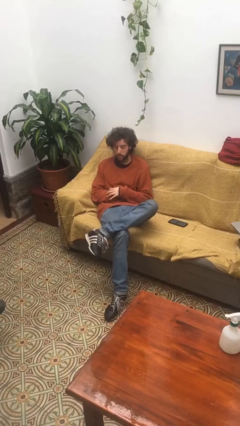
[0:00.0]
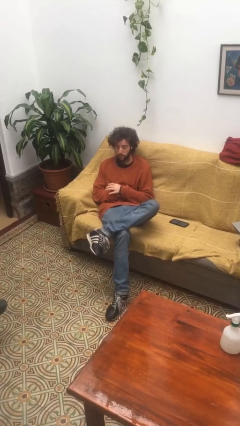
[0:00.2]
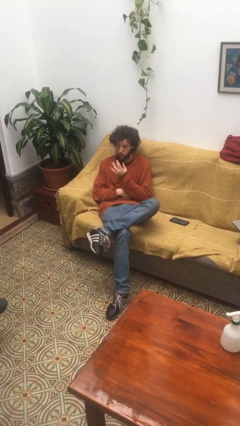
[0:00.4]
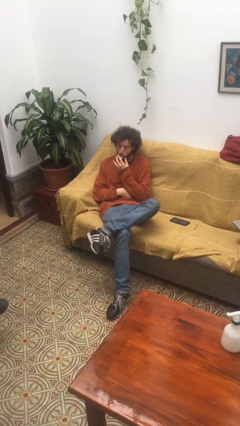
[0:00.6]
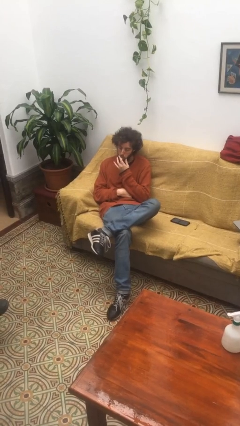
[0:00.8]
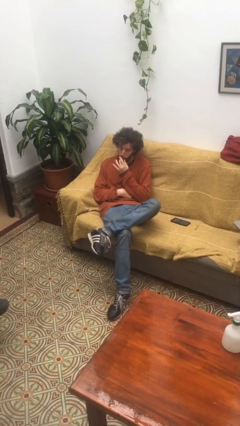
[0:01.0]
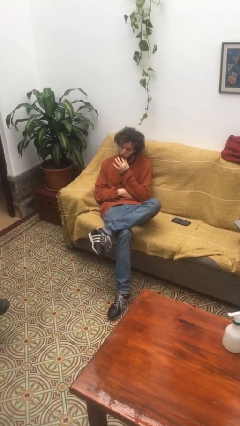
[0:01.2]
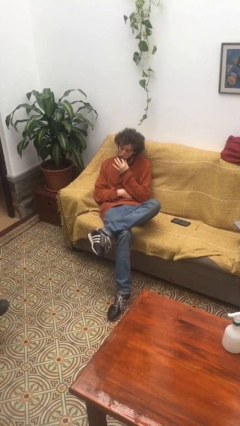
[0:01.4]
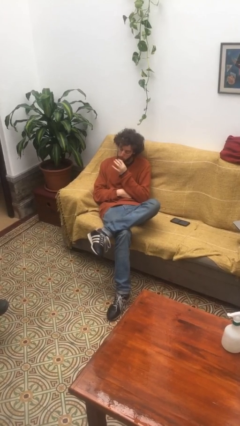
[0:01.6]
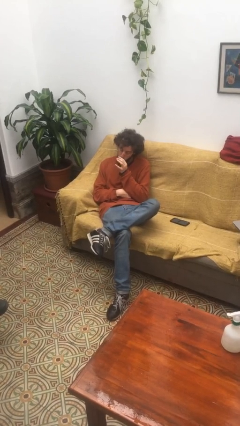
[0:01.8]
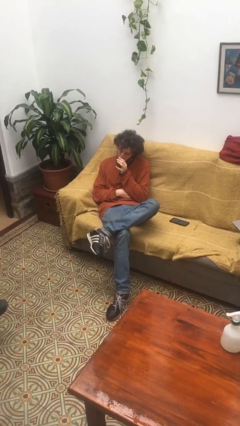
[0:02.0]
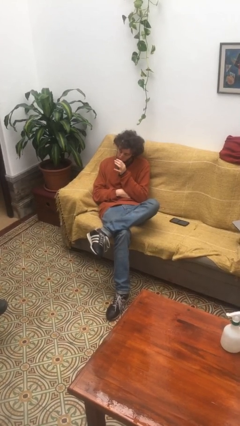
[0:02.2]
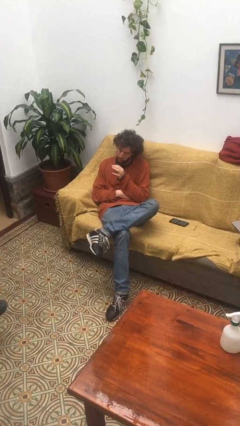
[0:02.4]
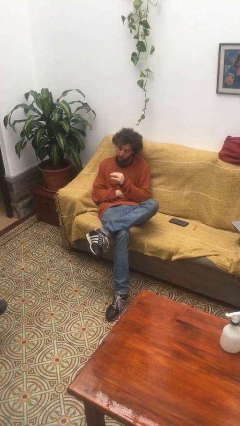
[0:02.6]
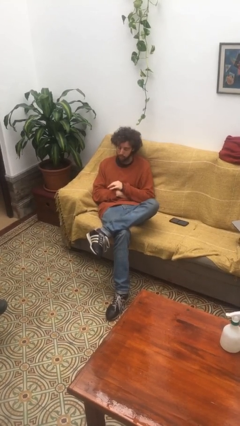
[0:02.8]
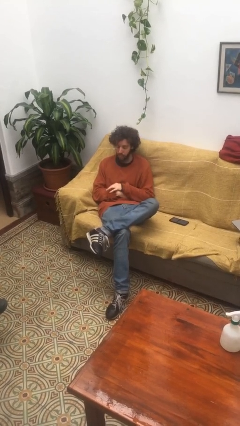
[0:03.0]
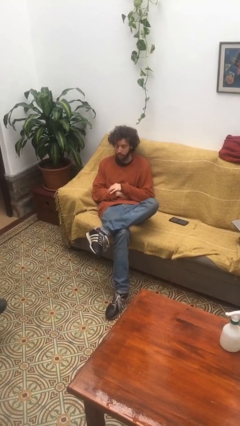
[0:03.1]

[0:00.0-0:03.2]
person licks fingers

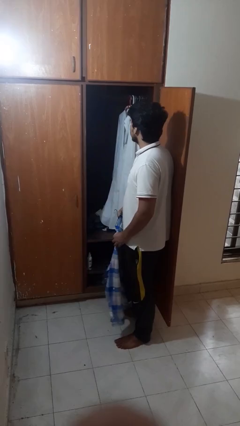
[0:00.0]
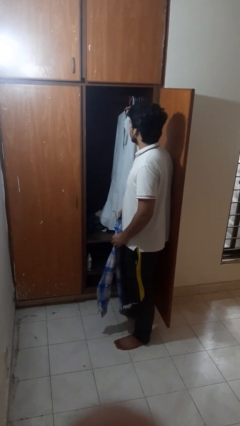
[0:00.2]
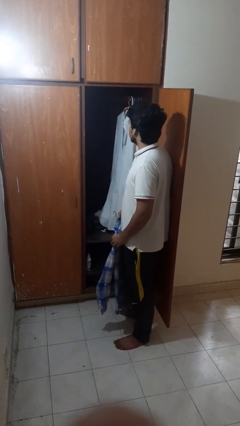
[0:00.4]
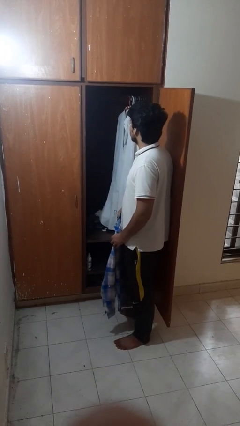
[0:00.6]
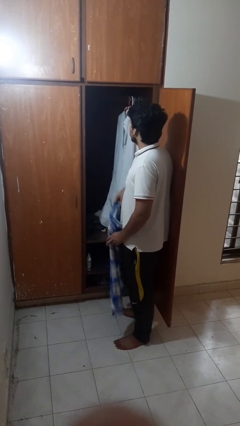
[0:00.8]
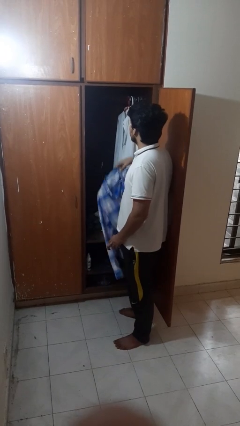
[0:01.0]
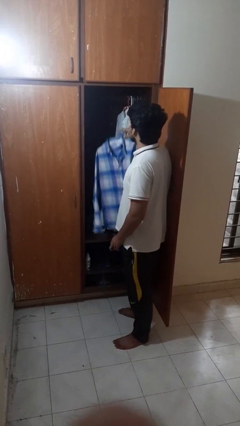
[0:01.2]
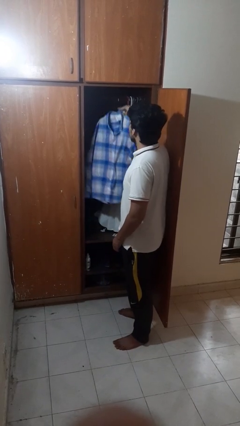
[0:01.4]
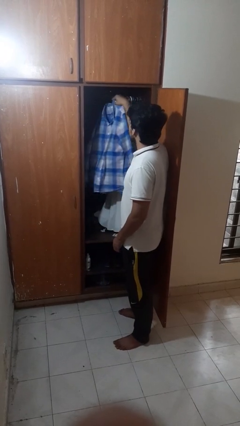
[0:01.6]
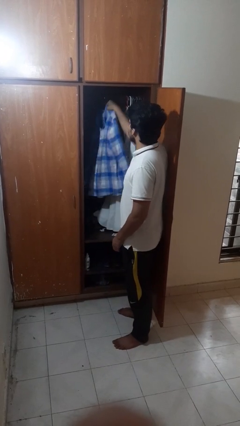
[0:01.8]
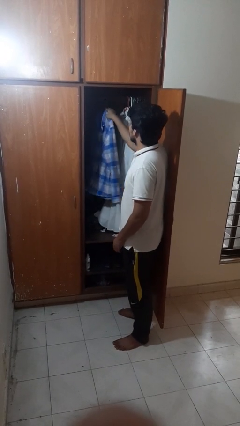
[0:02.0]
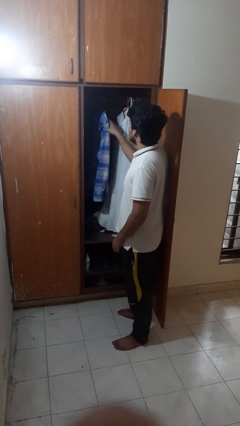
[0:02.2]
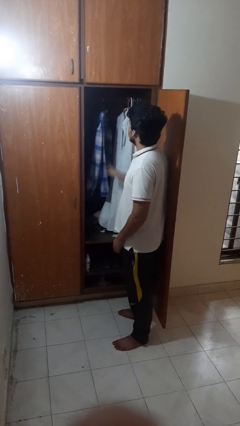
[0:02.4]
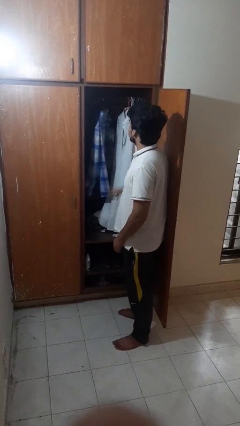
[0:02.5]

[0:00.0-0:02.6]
person puts clothes into closet

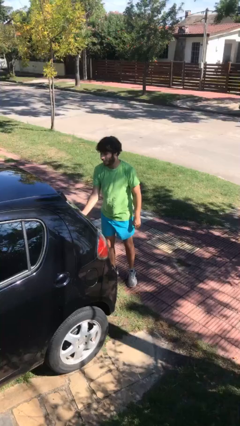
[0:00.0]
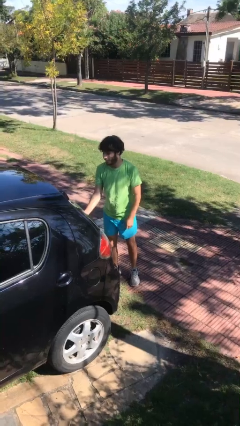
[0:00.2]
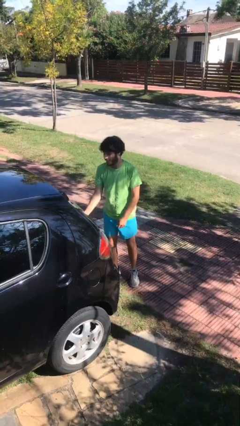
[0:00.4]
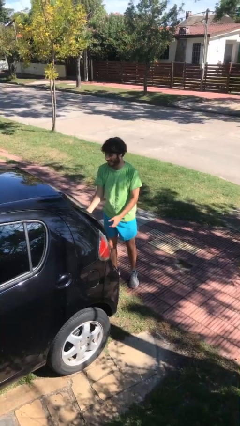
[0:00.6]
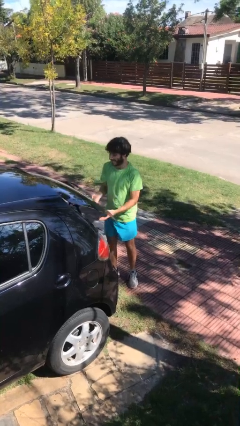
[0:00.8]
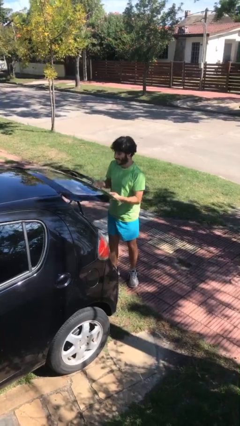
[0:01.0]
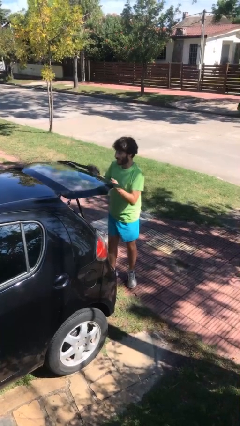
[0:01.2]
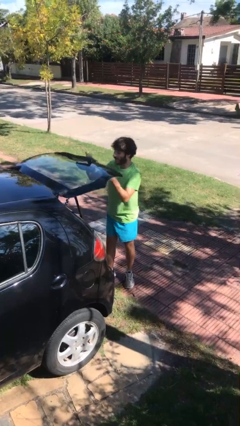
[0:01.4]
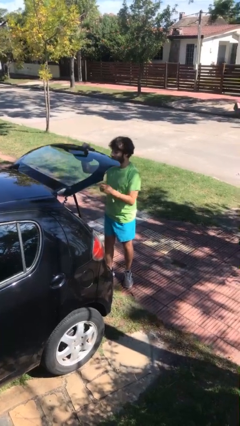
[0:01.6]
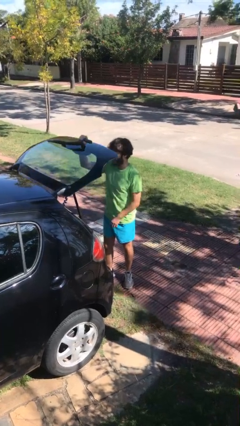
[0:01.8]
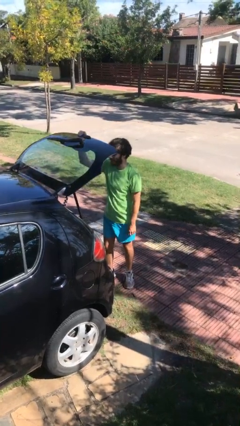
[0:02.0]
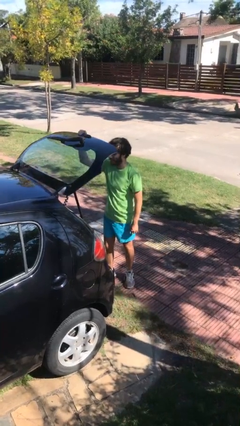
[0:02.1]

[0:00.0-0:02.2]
person opens car trunk

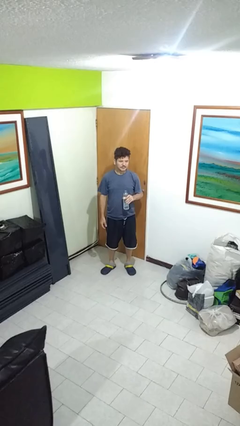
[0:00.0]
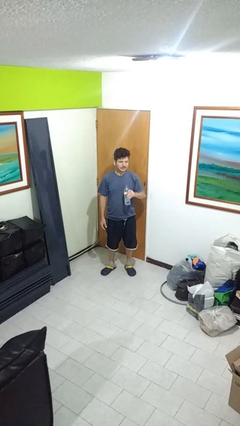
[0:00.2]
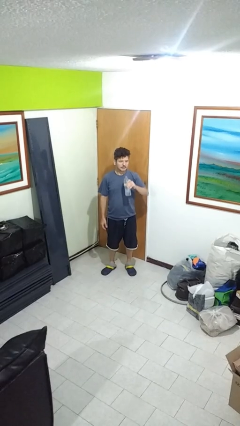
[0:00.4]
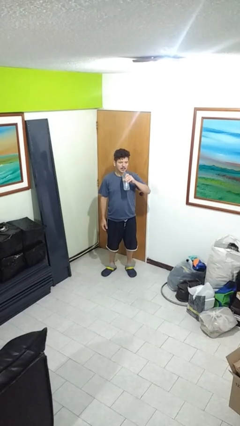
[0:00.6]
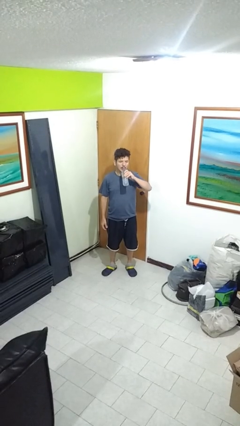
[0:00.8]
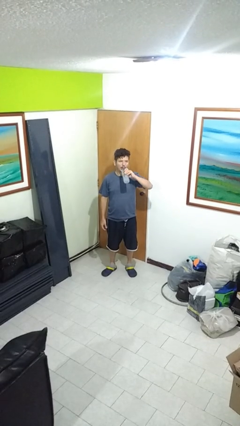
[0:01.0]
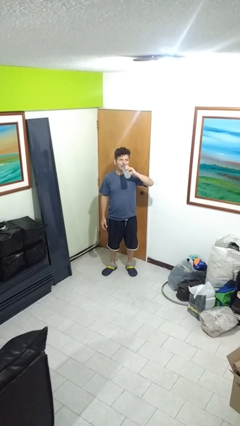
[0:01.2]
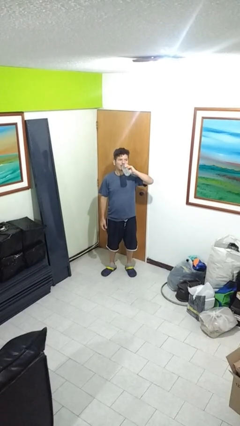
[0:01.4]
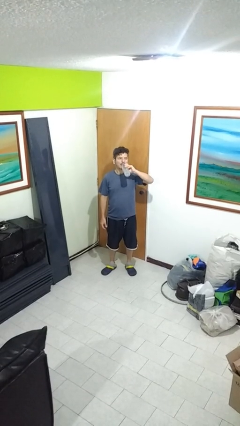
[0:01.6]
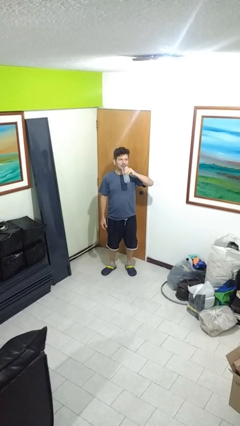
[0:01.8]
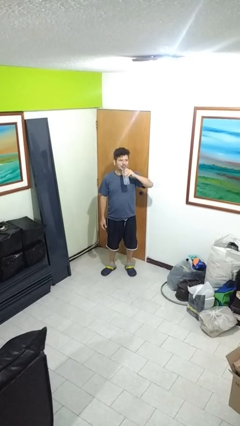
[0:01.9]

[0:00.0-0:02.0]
person drinks from bottle

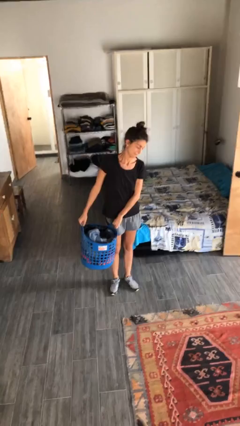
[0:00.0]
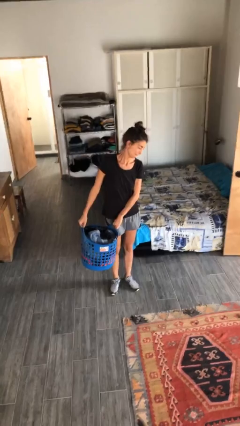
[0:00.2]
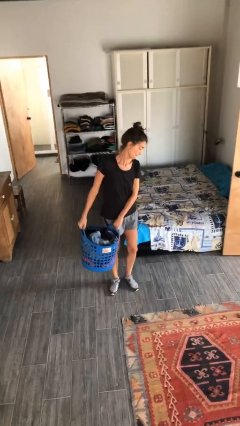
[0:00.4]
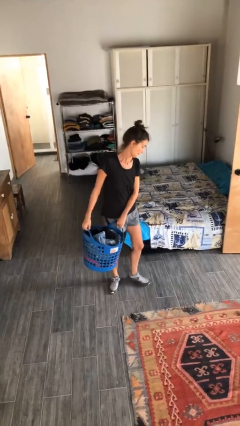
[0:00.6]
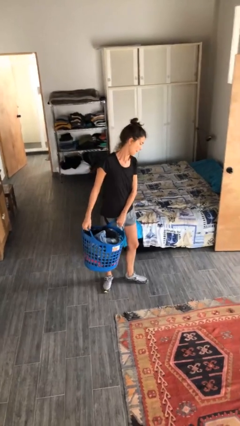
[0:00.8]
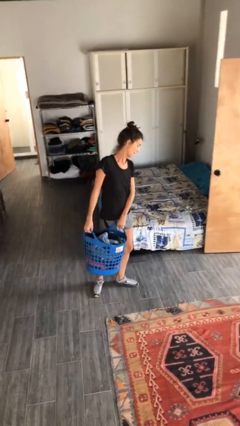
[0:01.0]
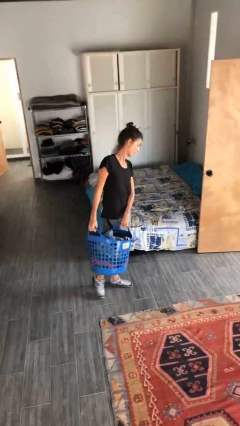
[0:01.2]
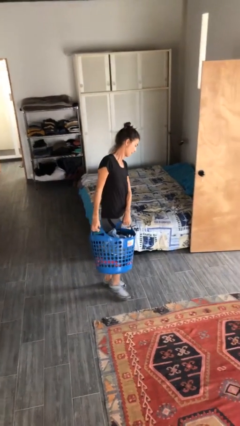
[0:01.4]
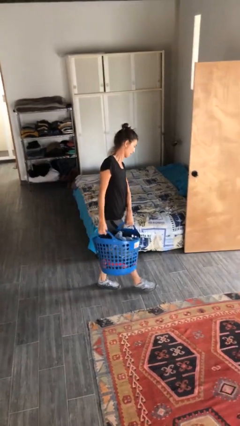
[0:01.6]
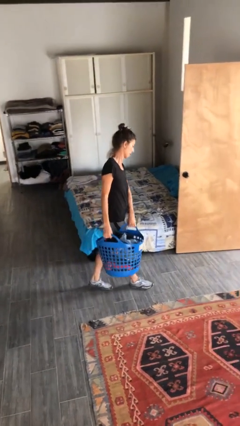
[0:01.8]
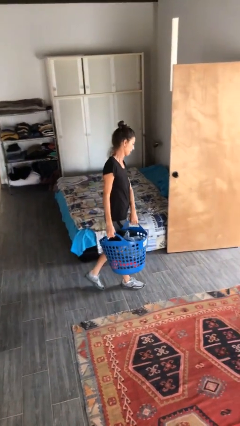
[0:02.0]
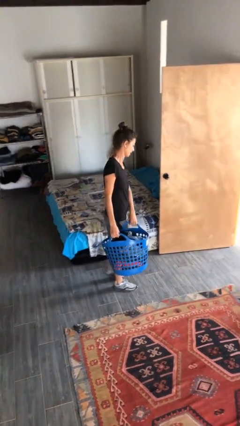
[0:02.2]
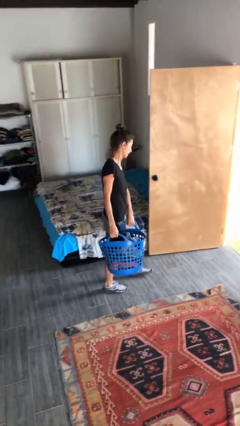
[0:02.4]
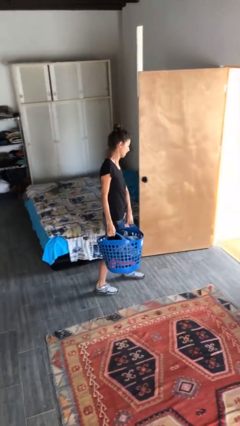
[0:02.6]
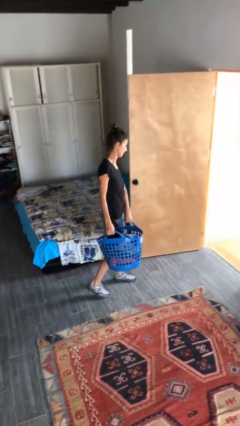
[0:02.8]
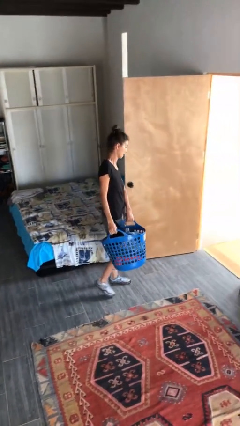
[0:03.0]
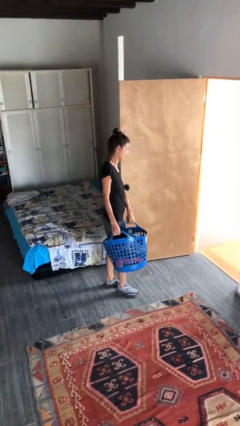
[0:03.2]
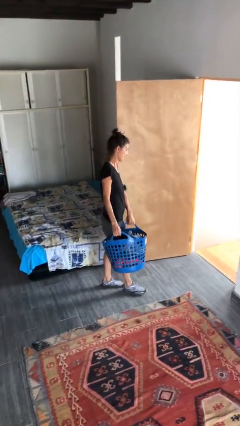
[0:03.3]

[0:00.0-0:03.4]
person carries laundry basket

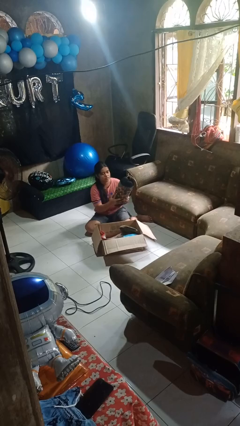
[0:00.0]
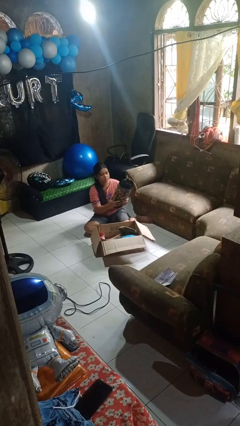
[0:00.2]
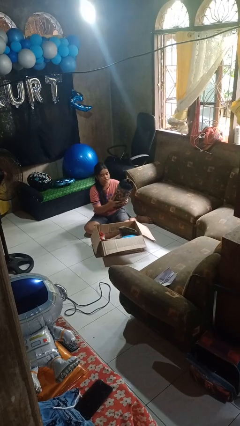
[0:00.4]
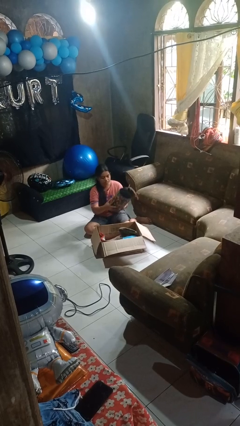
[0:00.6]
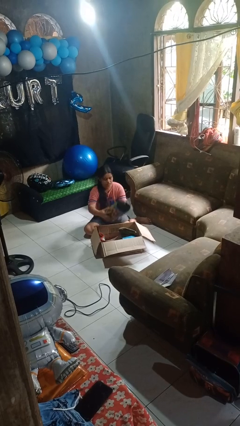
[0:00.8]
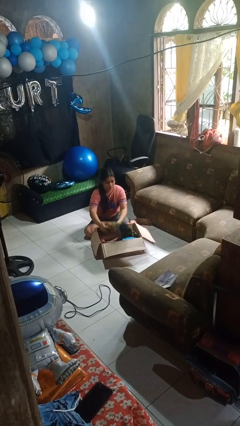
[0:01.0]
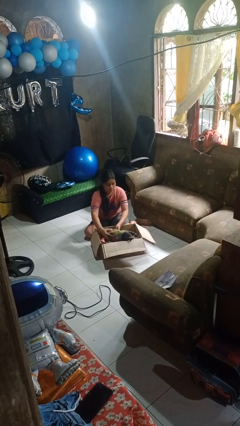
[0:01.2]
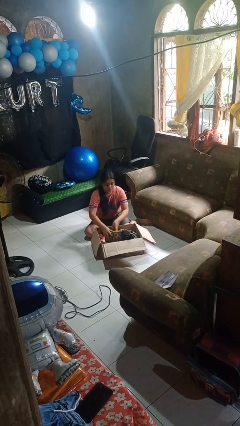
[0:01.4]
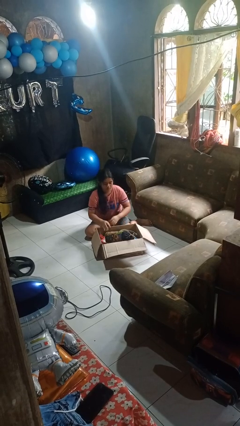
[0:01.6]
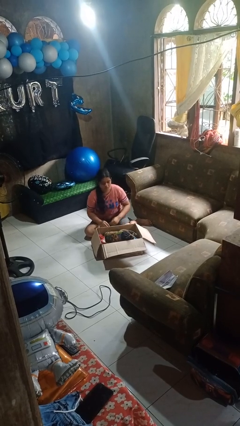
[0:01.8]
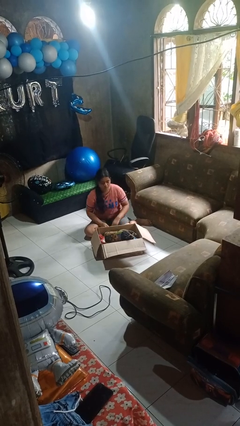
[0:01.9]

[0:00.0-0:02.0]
person puts object into box

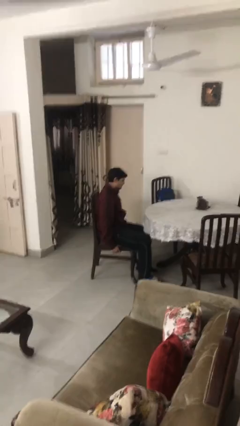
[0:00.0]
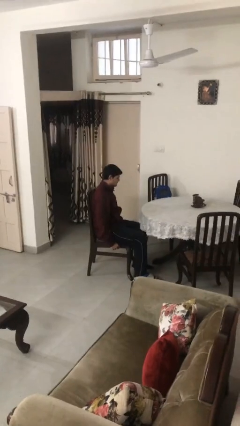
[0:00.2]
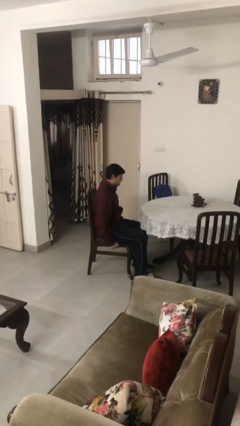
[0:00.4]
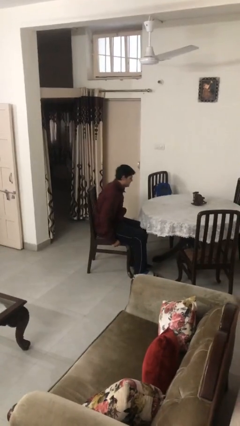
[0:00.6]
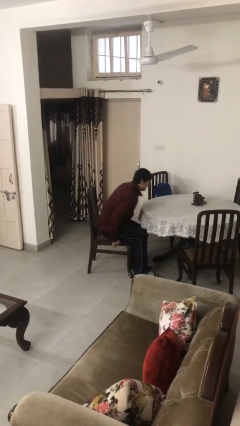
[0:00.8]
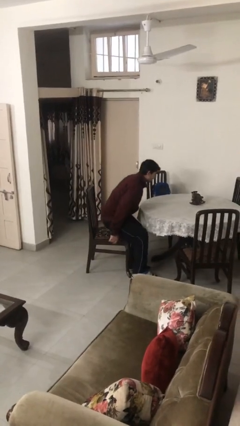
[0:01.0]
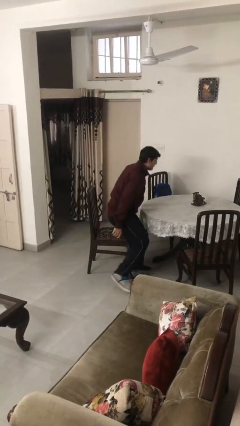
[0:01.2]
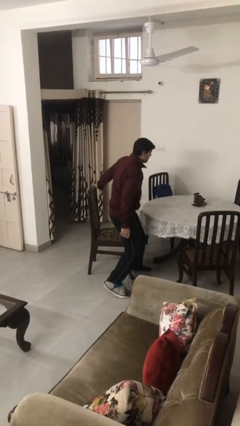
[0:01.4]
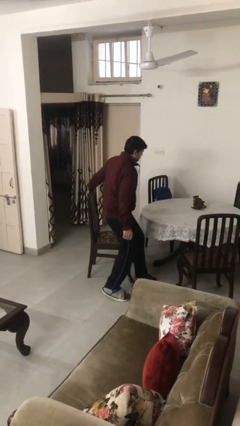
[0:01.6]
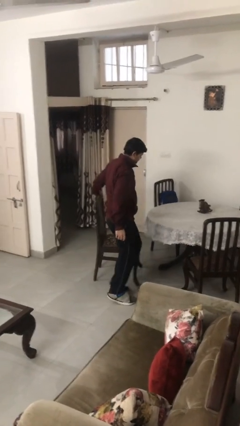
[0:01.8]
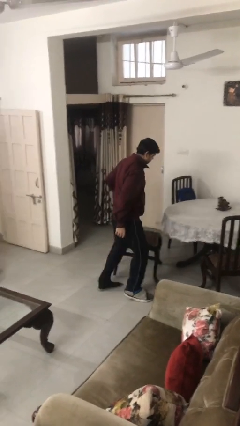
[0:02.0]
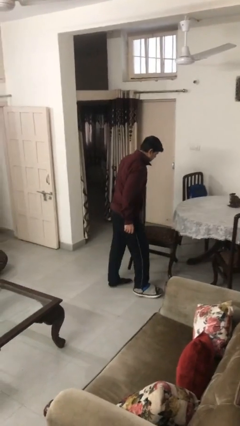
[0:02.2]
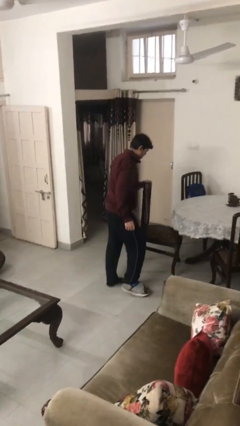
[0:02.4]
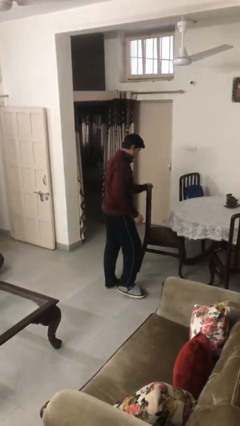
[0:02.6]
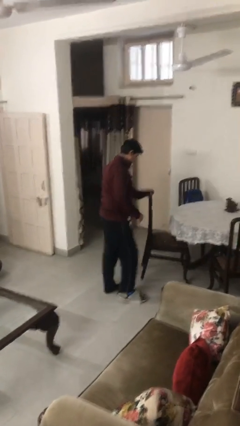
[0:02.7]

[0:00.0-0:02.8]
person stands up
